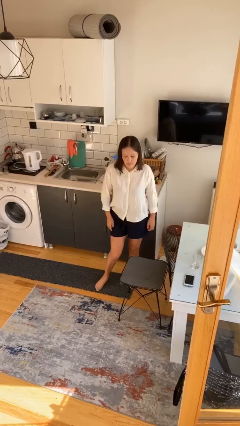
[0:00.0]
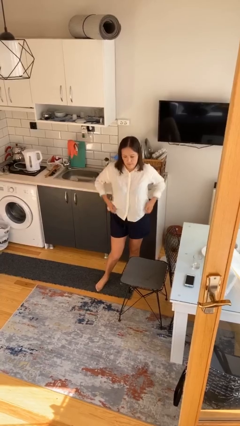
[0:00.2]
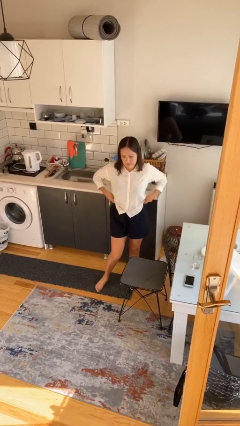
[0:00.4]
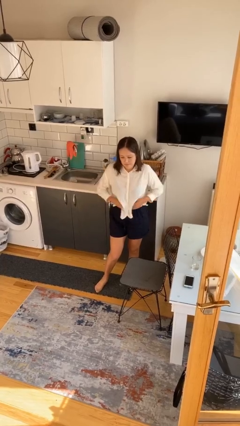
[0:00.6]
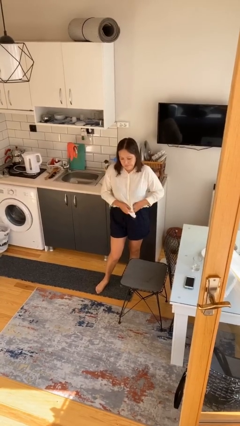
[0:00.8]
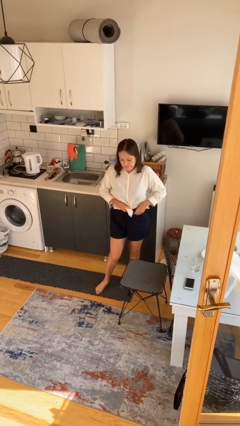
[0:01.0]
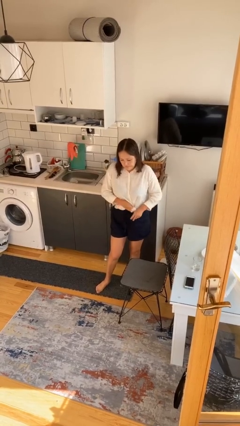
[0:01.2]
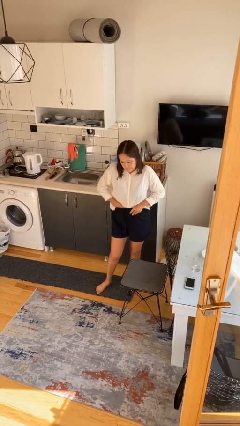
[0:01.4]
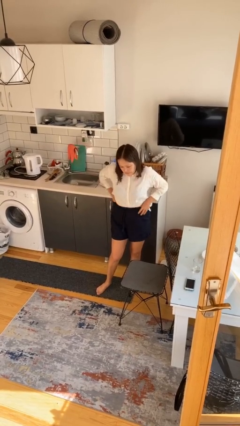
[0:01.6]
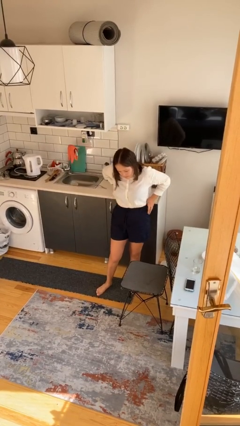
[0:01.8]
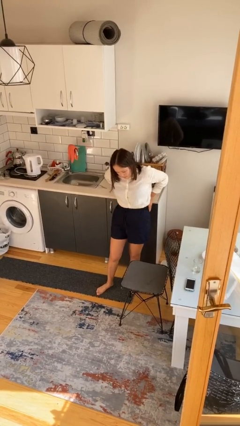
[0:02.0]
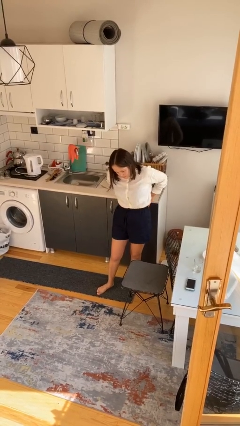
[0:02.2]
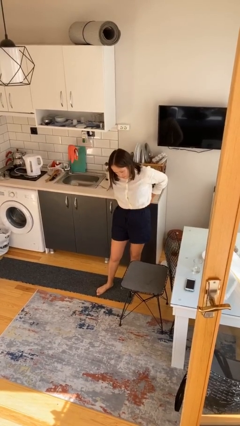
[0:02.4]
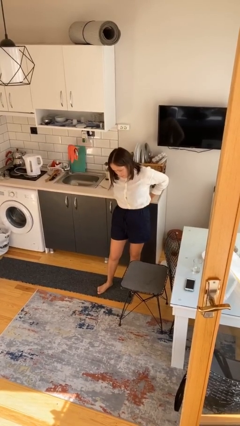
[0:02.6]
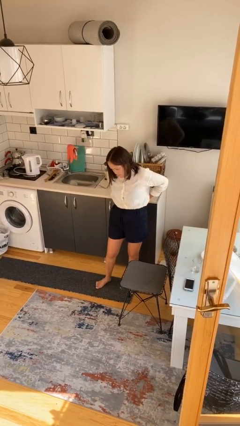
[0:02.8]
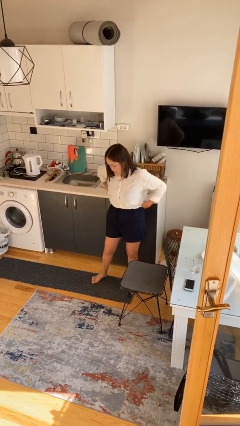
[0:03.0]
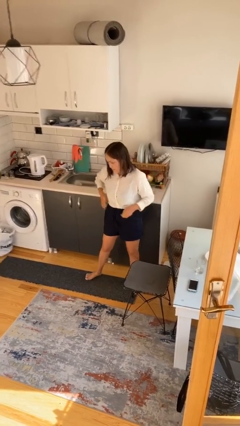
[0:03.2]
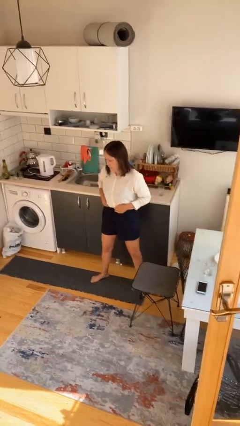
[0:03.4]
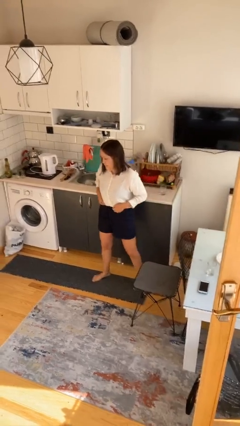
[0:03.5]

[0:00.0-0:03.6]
person tucks in shirt

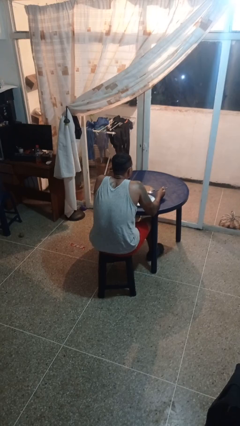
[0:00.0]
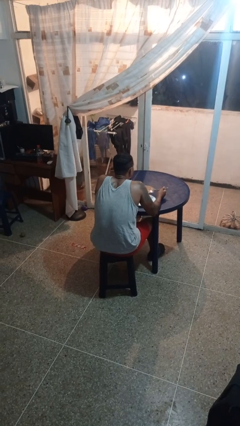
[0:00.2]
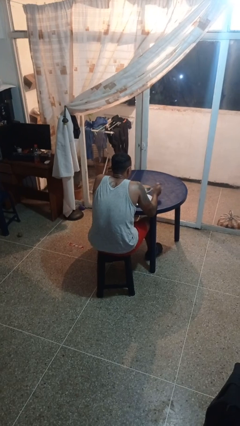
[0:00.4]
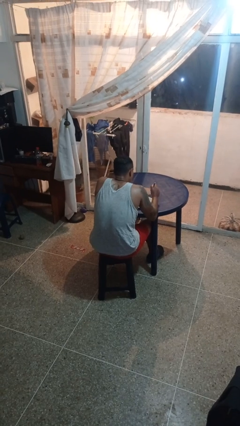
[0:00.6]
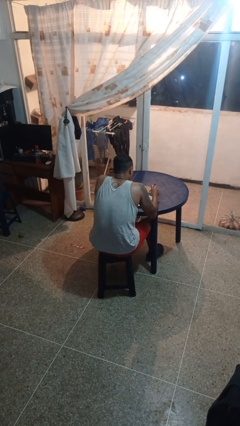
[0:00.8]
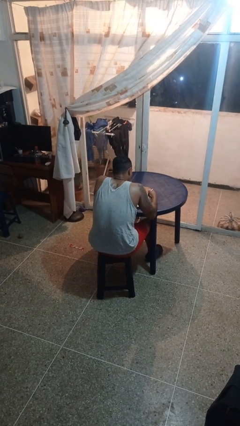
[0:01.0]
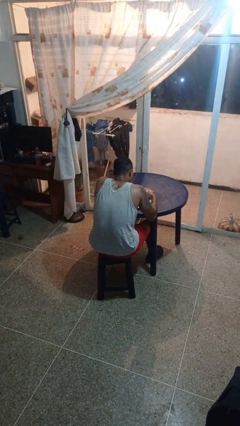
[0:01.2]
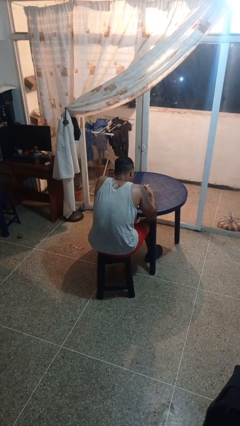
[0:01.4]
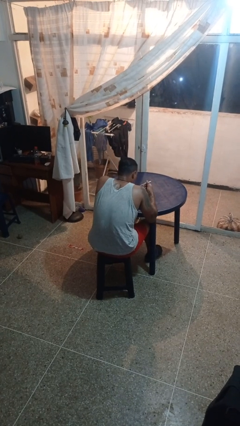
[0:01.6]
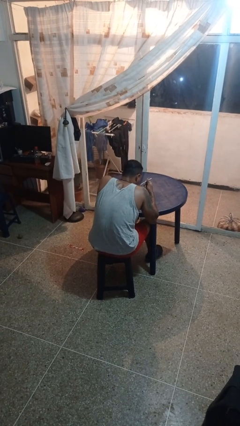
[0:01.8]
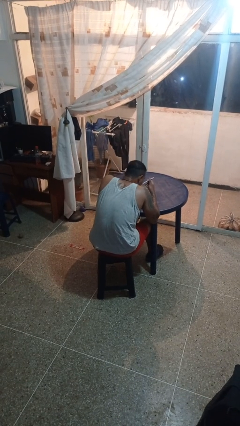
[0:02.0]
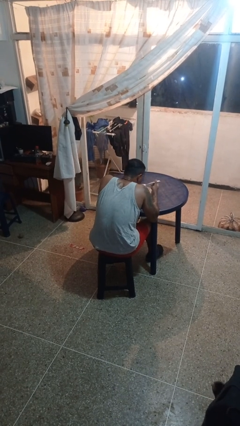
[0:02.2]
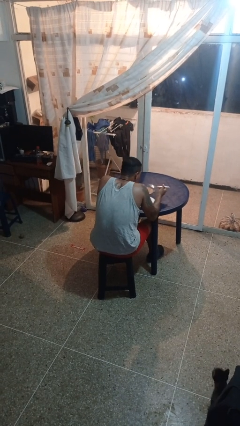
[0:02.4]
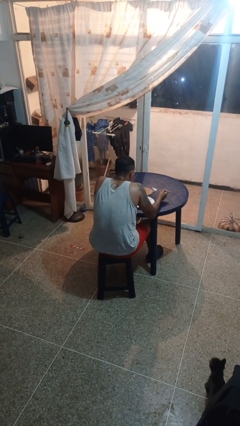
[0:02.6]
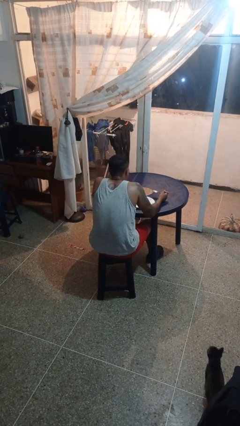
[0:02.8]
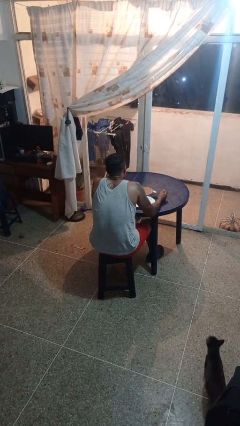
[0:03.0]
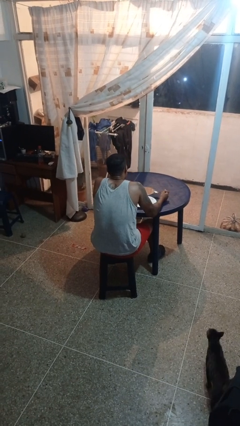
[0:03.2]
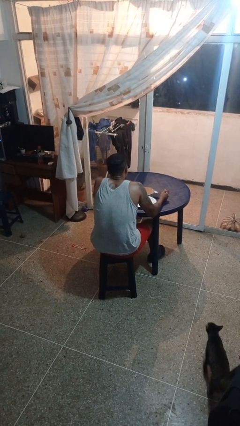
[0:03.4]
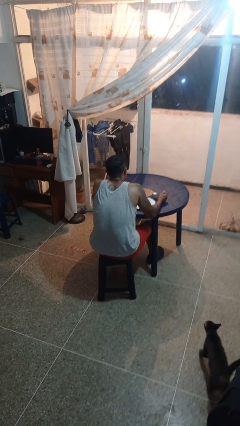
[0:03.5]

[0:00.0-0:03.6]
person eats with utensil

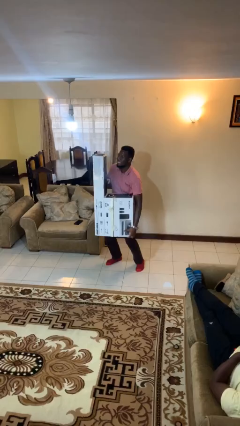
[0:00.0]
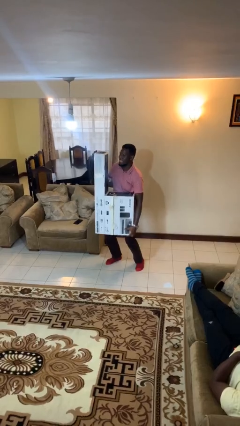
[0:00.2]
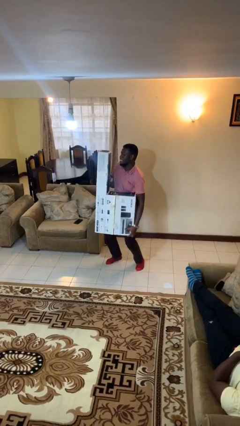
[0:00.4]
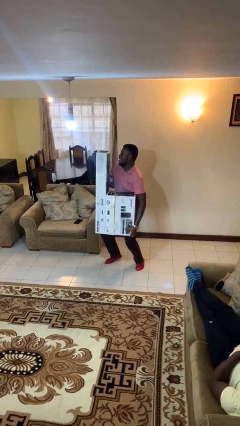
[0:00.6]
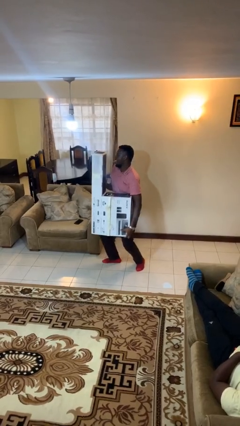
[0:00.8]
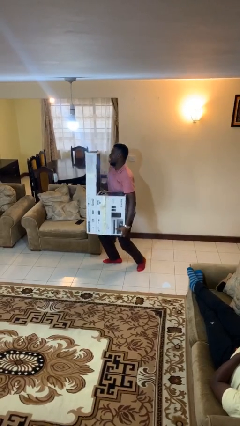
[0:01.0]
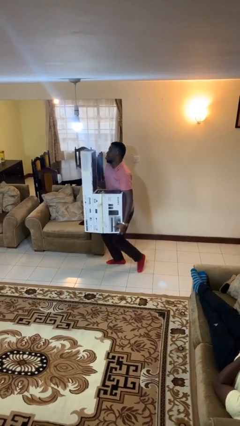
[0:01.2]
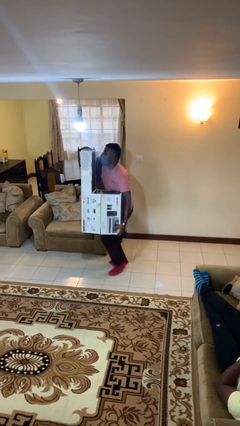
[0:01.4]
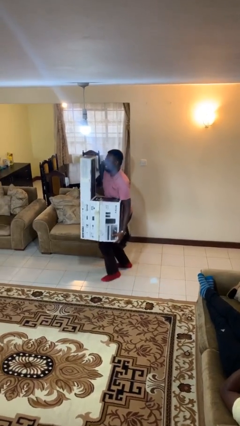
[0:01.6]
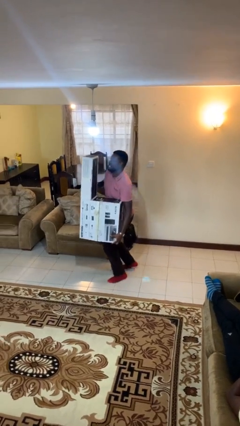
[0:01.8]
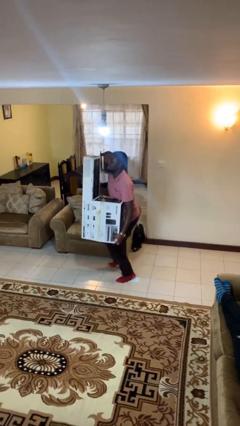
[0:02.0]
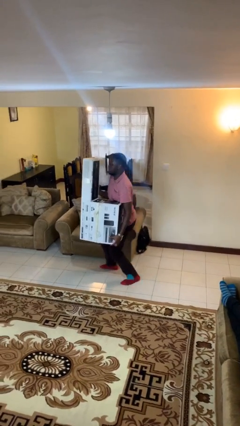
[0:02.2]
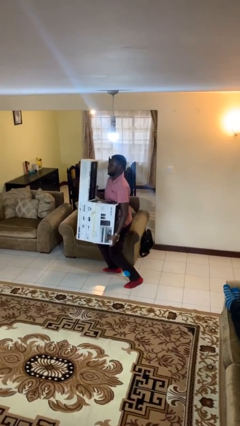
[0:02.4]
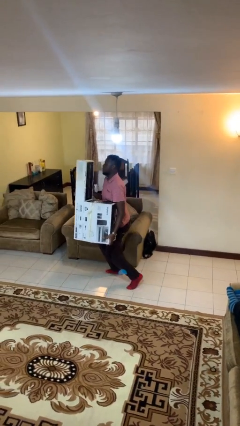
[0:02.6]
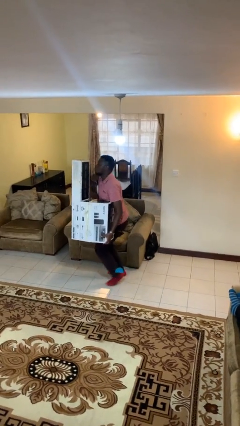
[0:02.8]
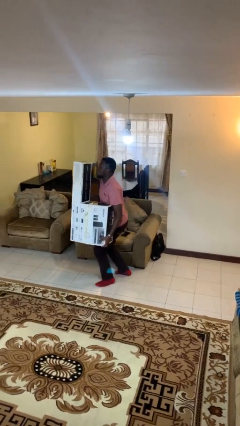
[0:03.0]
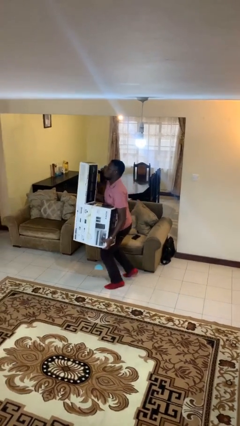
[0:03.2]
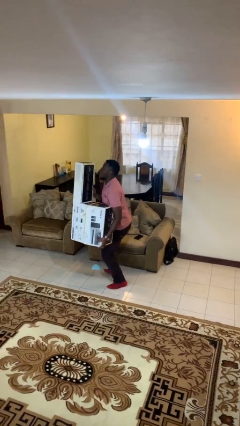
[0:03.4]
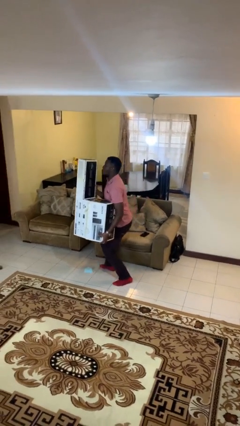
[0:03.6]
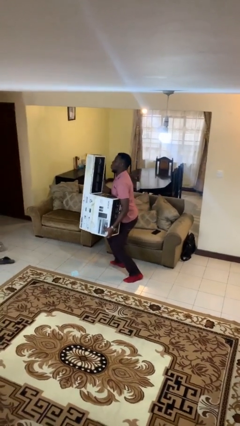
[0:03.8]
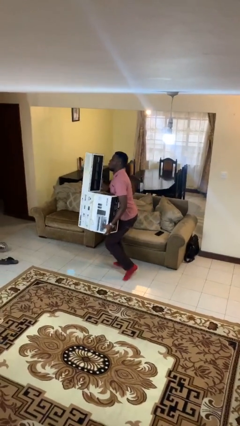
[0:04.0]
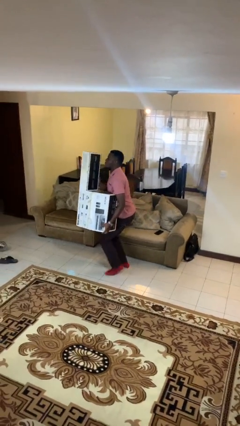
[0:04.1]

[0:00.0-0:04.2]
person carries heavy object

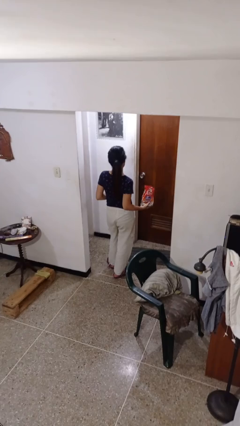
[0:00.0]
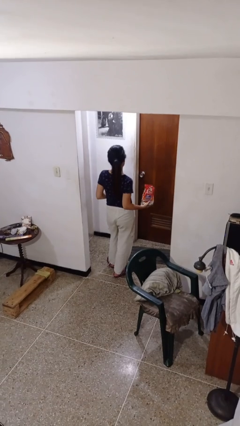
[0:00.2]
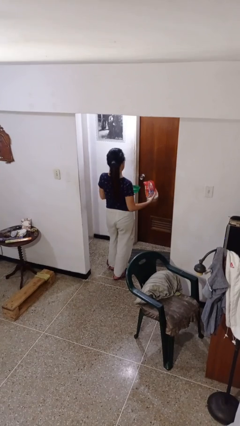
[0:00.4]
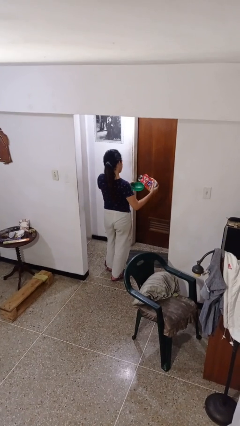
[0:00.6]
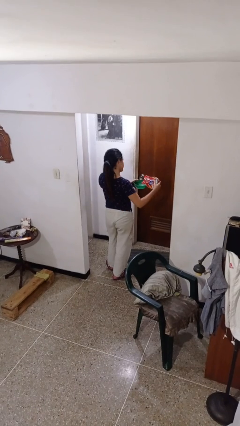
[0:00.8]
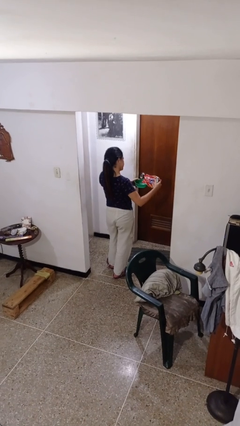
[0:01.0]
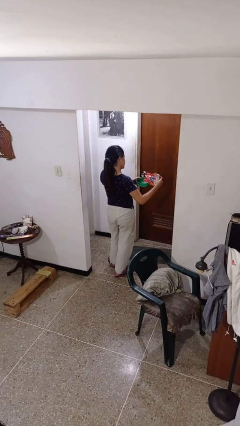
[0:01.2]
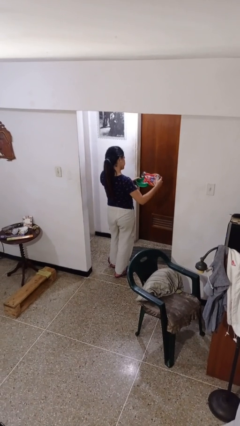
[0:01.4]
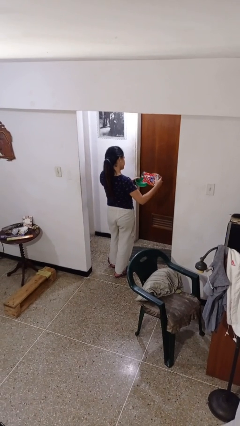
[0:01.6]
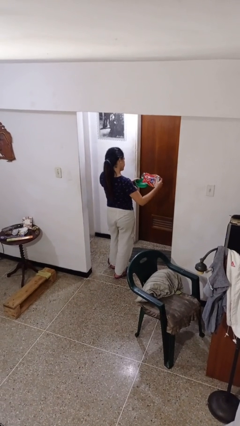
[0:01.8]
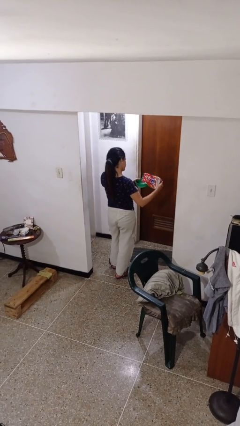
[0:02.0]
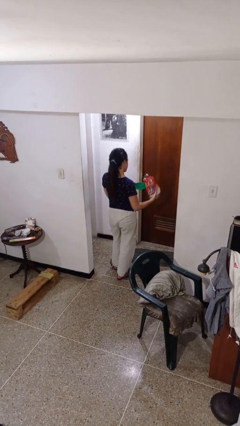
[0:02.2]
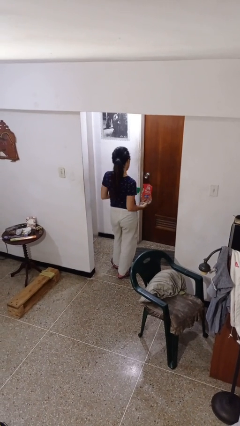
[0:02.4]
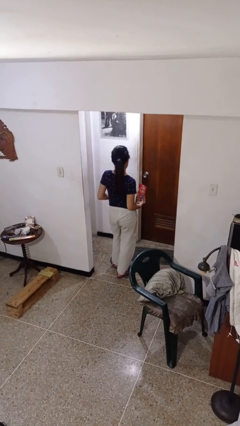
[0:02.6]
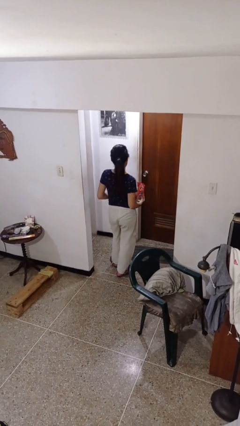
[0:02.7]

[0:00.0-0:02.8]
person pours into bowl

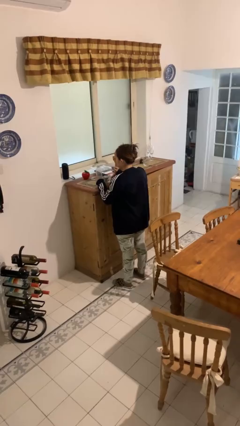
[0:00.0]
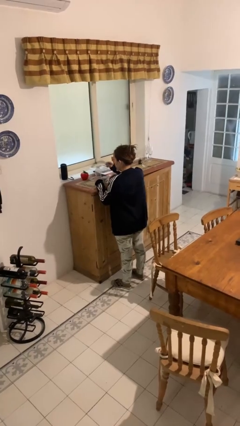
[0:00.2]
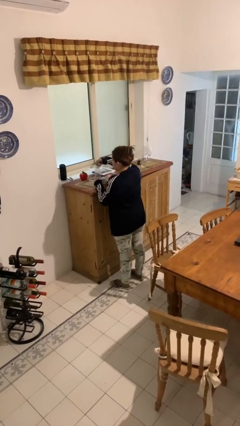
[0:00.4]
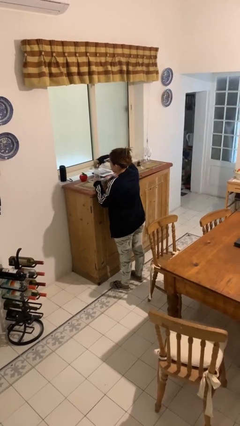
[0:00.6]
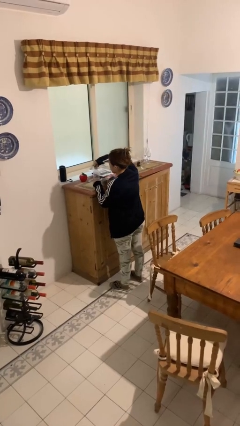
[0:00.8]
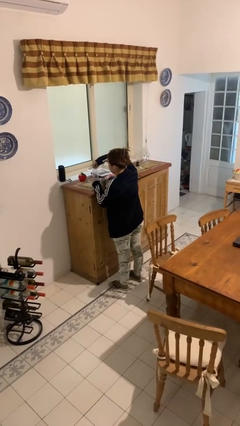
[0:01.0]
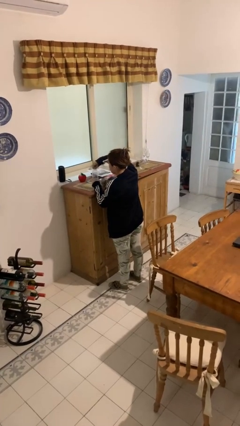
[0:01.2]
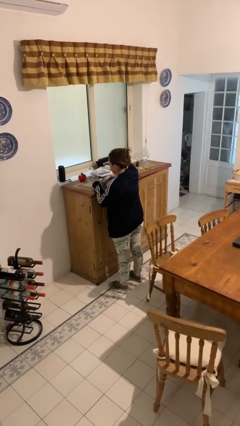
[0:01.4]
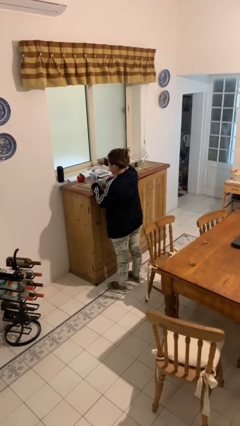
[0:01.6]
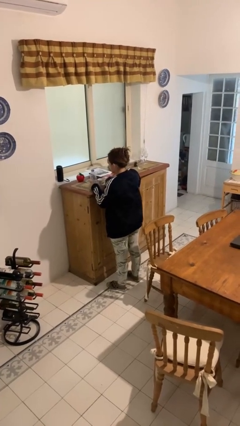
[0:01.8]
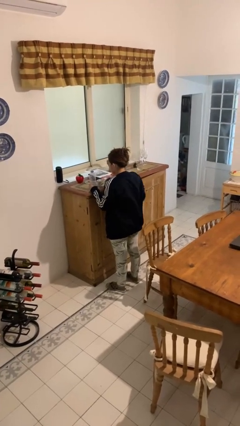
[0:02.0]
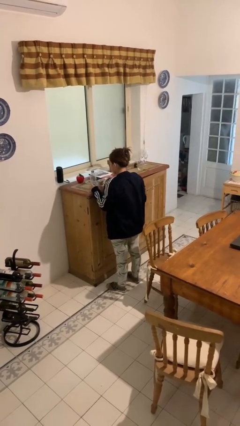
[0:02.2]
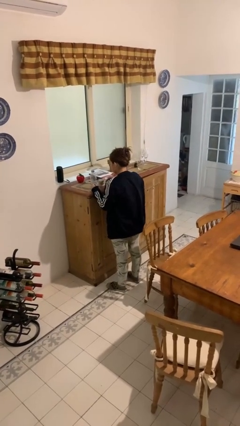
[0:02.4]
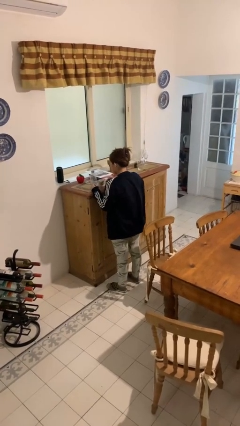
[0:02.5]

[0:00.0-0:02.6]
person screws lid to bottle

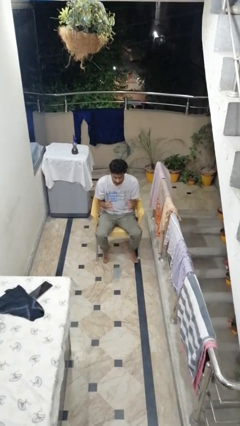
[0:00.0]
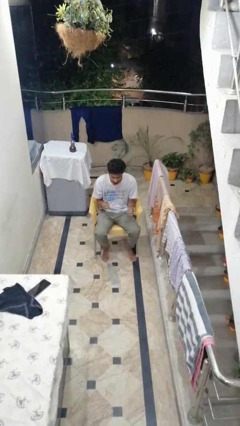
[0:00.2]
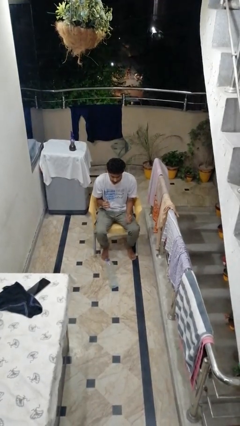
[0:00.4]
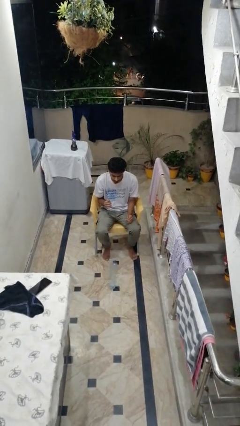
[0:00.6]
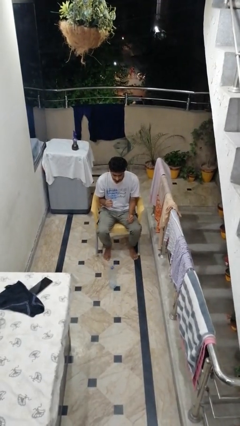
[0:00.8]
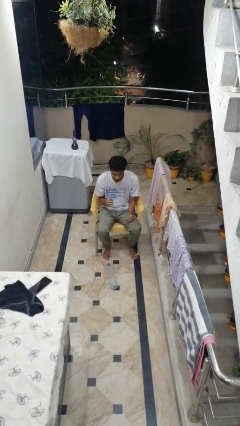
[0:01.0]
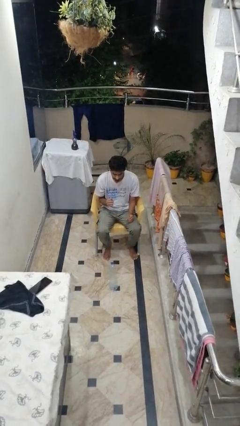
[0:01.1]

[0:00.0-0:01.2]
person drops object
